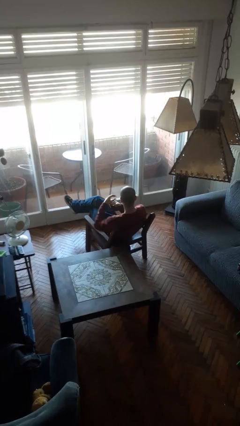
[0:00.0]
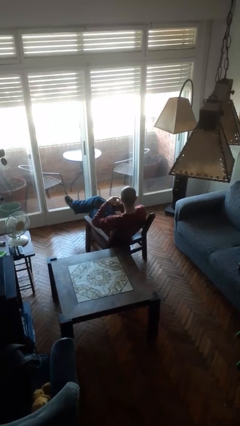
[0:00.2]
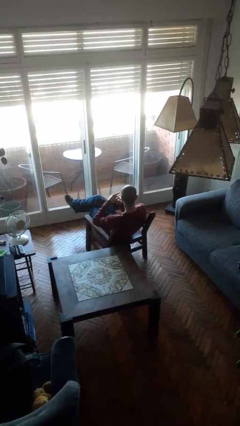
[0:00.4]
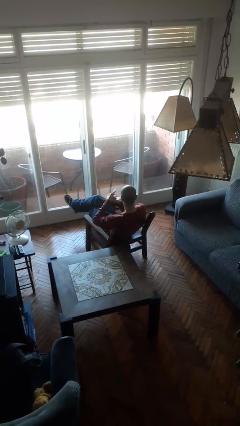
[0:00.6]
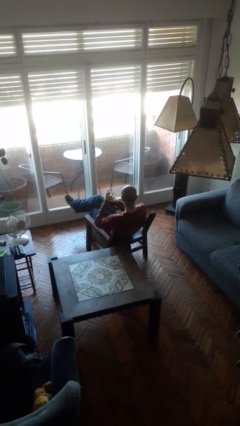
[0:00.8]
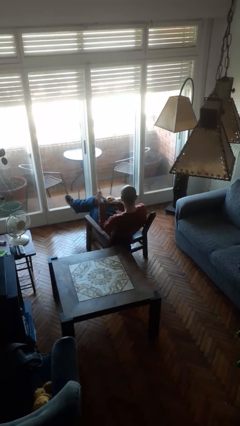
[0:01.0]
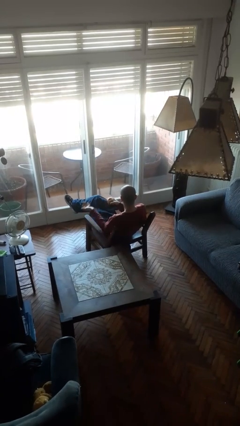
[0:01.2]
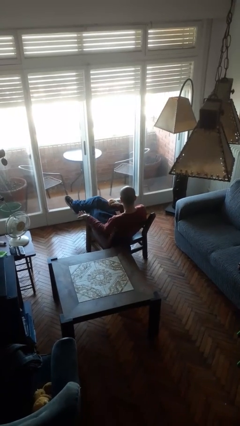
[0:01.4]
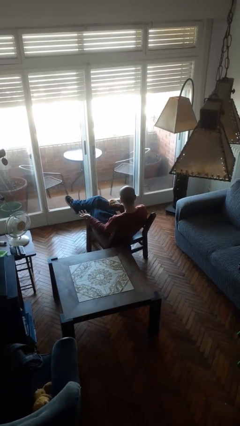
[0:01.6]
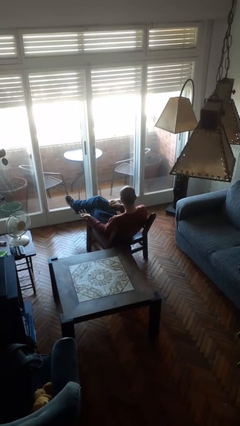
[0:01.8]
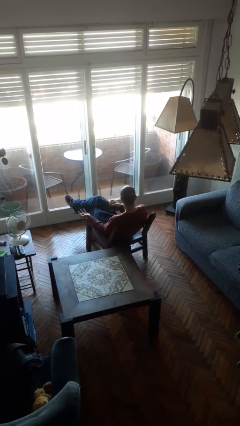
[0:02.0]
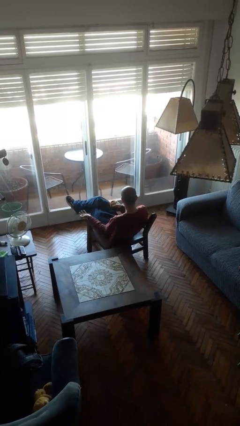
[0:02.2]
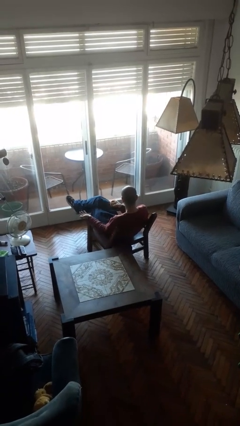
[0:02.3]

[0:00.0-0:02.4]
person opens jar

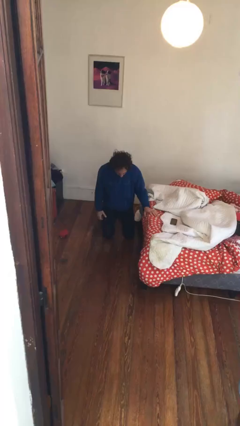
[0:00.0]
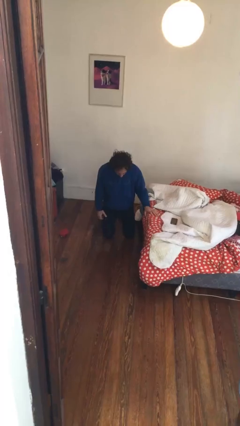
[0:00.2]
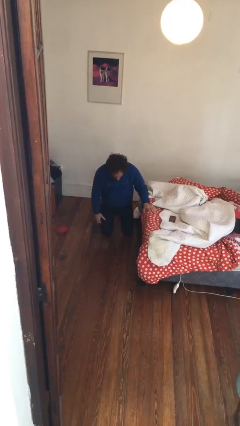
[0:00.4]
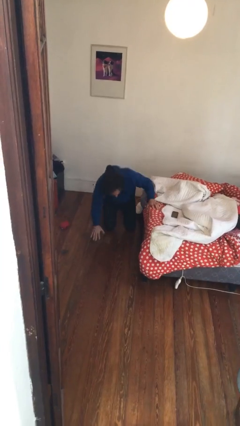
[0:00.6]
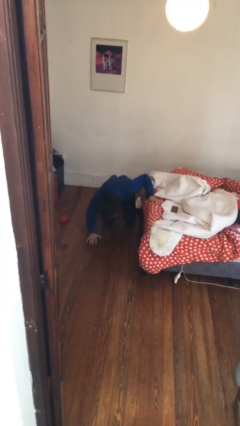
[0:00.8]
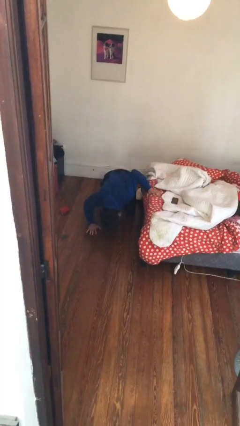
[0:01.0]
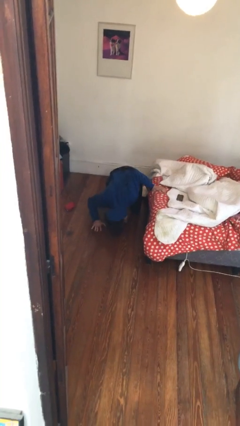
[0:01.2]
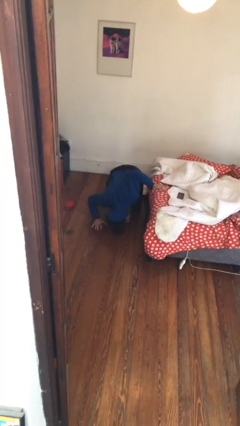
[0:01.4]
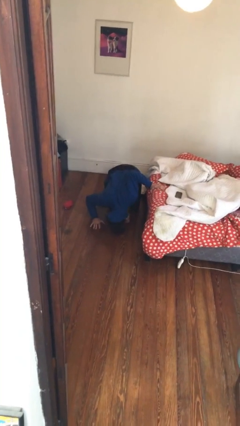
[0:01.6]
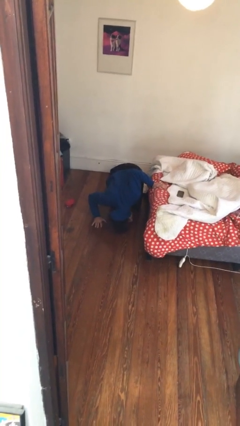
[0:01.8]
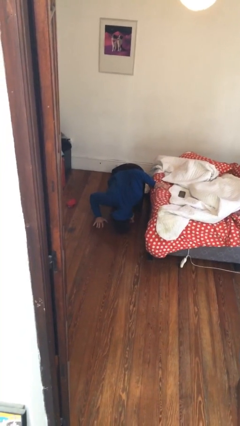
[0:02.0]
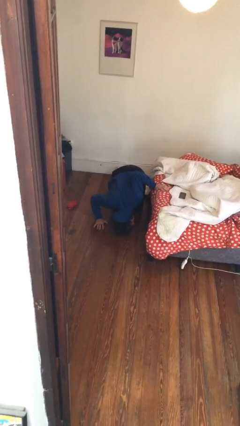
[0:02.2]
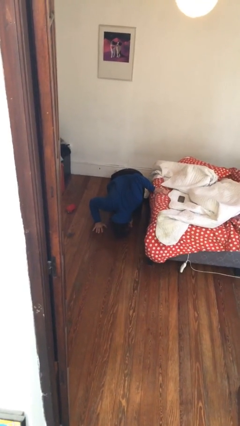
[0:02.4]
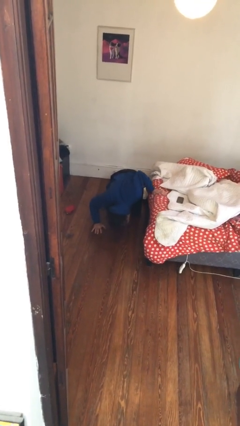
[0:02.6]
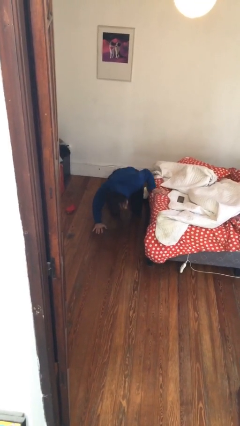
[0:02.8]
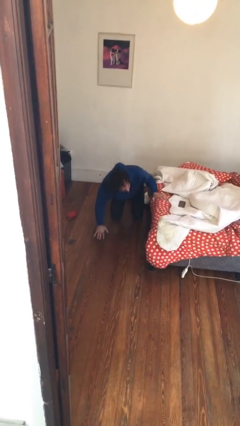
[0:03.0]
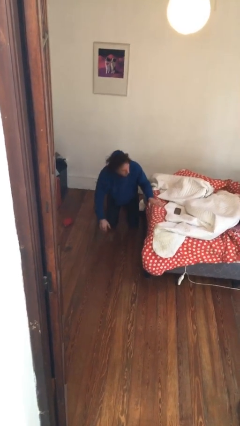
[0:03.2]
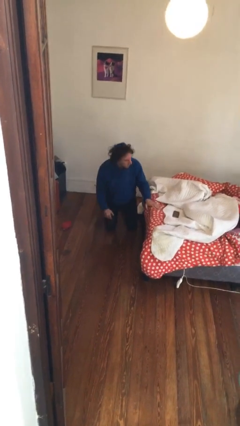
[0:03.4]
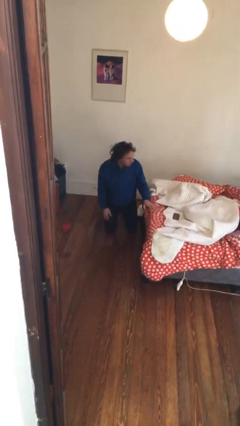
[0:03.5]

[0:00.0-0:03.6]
person searches under bed

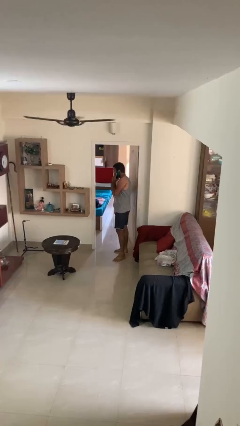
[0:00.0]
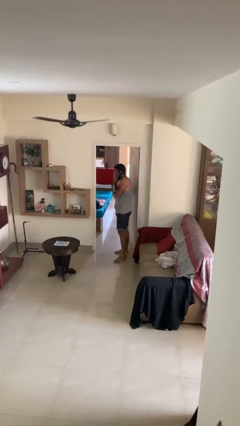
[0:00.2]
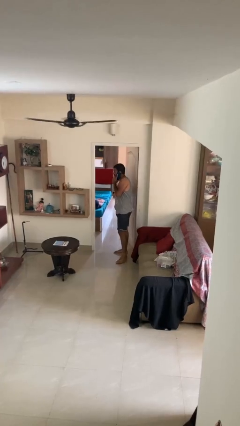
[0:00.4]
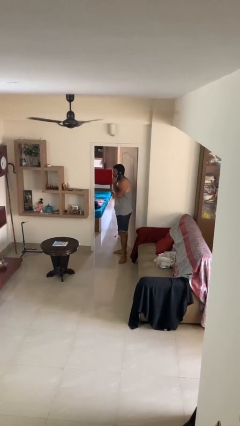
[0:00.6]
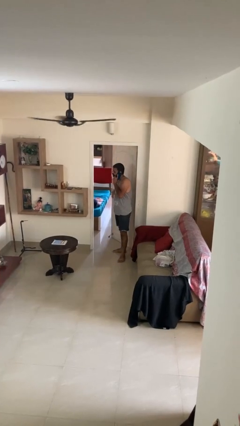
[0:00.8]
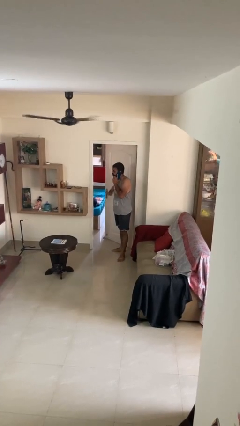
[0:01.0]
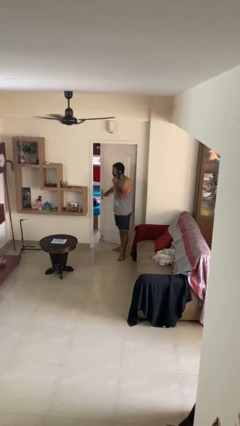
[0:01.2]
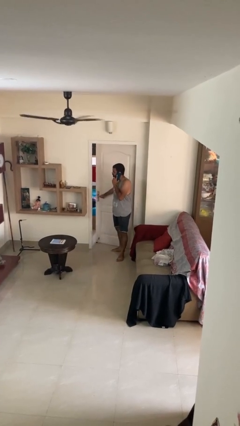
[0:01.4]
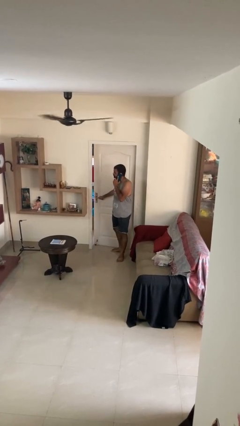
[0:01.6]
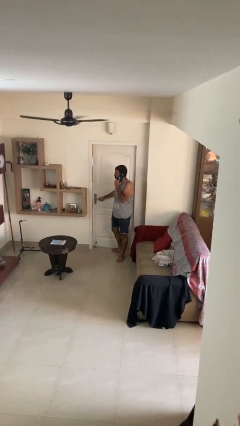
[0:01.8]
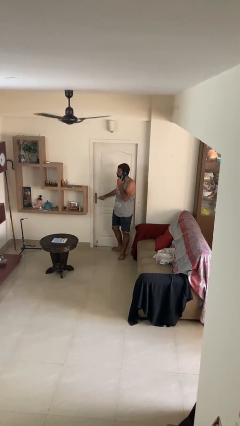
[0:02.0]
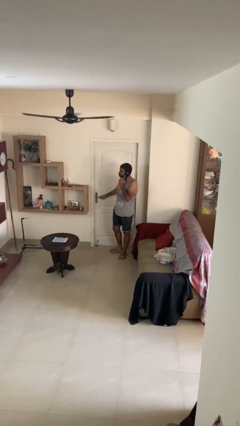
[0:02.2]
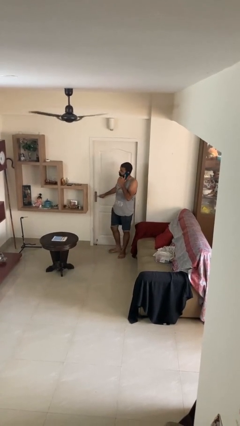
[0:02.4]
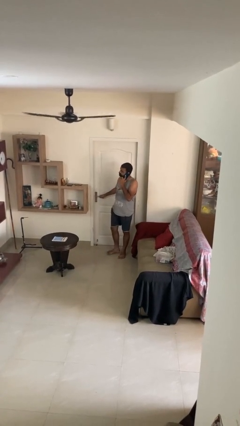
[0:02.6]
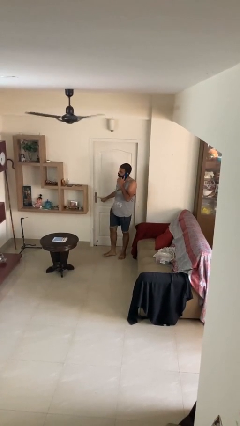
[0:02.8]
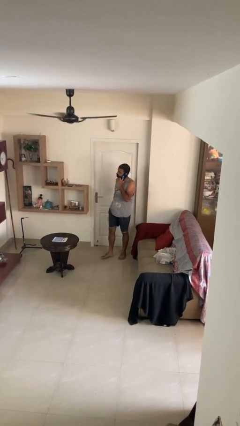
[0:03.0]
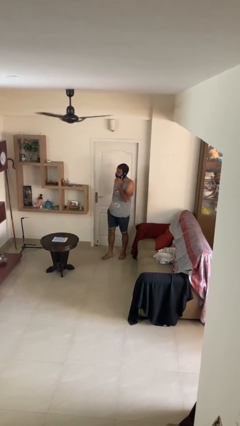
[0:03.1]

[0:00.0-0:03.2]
person closes facility door

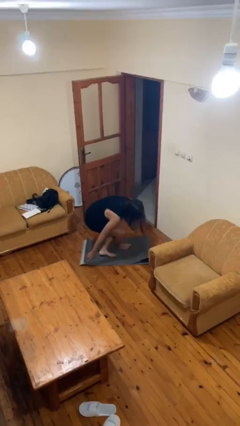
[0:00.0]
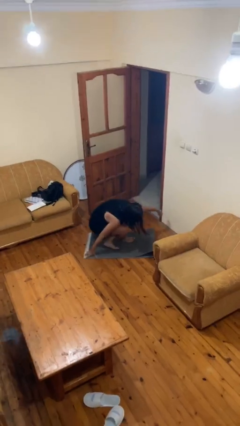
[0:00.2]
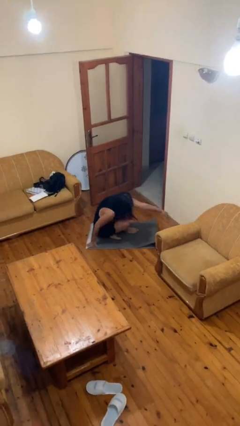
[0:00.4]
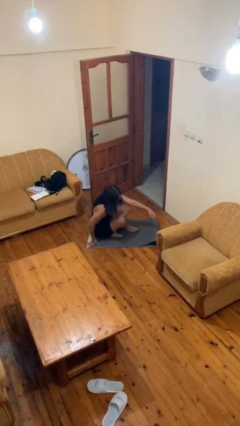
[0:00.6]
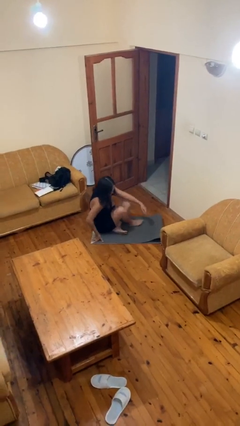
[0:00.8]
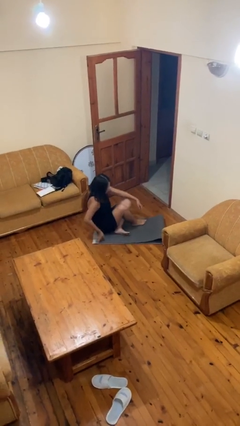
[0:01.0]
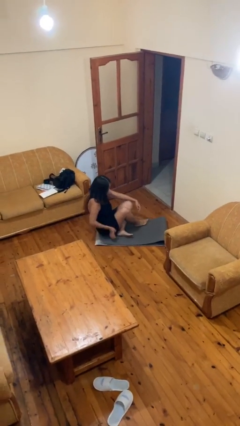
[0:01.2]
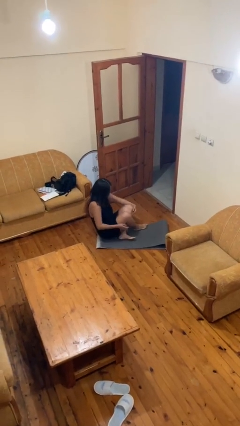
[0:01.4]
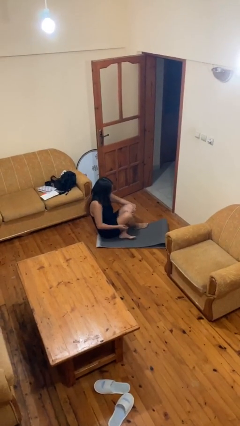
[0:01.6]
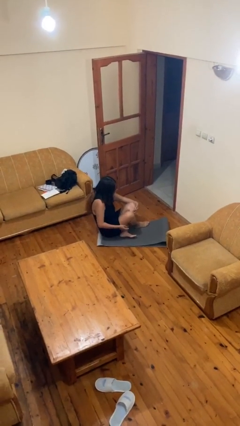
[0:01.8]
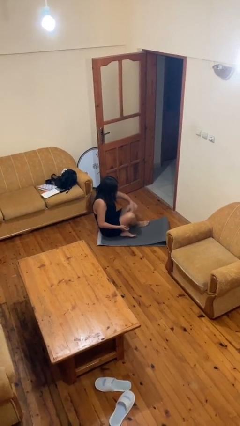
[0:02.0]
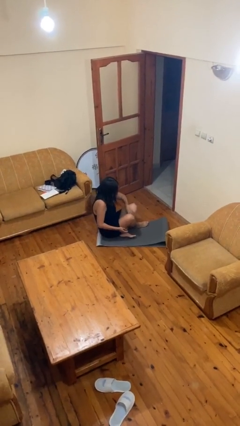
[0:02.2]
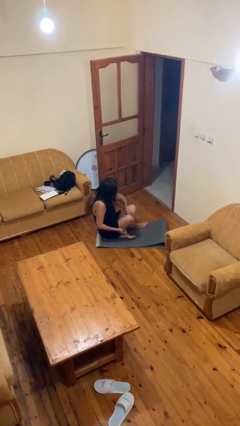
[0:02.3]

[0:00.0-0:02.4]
person sits crisscross

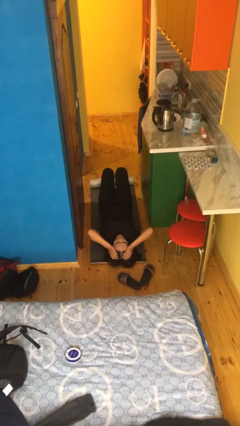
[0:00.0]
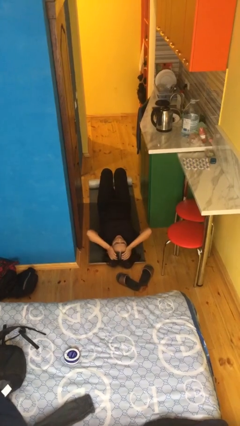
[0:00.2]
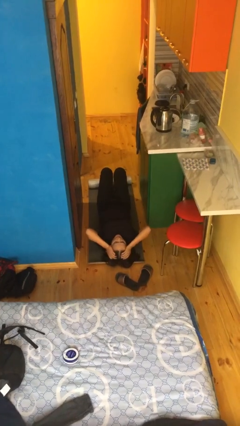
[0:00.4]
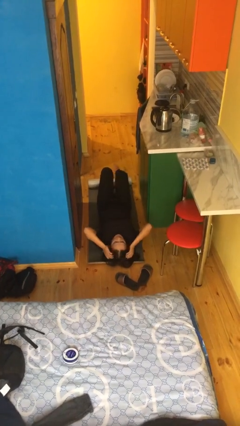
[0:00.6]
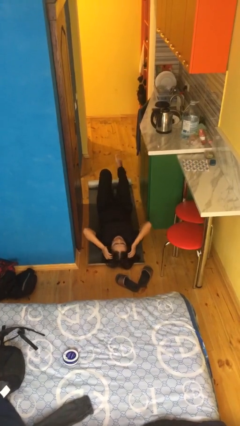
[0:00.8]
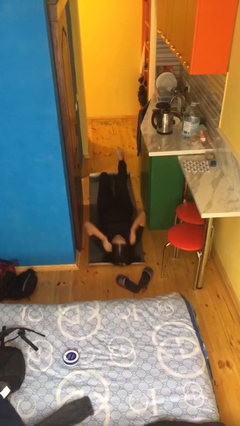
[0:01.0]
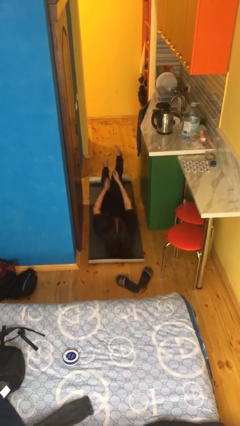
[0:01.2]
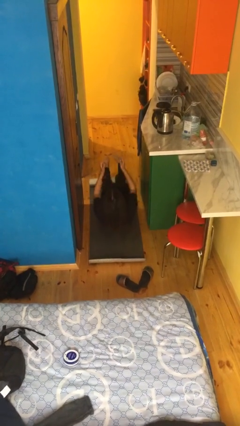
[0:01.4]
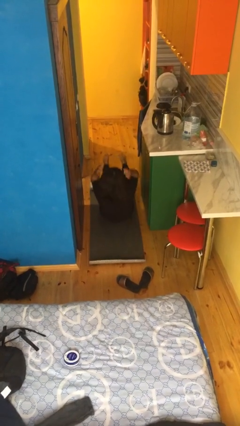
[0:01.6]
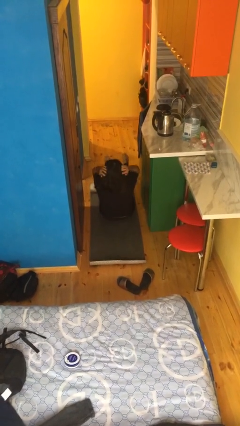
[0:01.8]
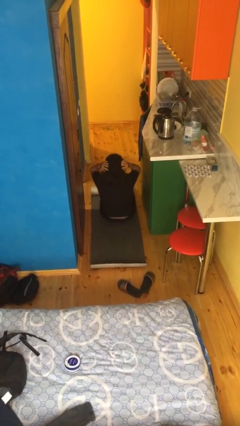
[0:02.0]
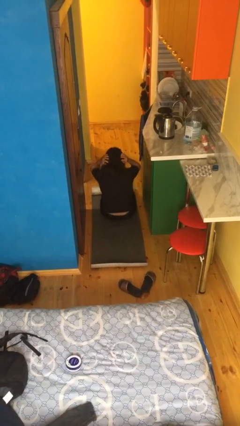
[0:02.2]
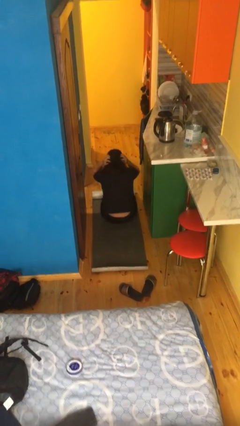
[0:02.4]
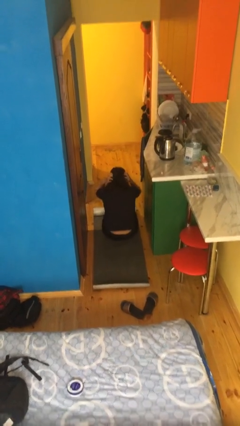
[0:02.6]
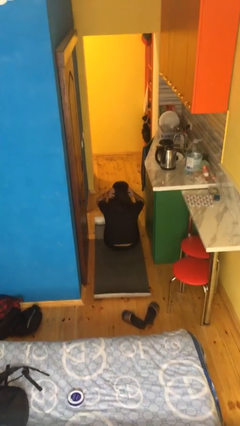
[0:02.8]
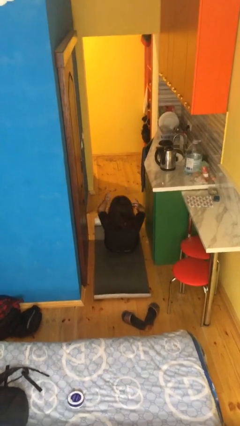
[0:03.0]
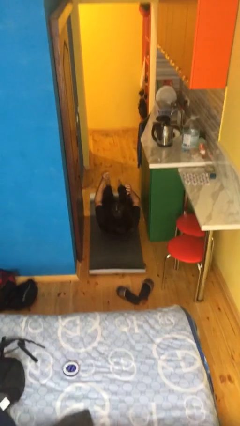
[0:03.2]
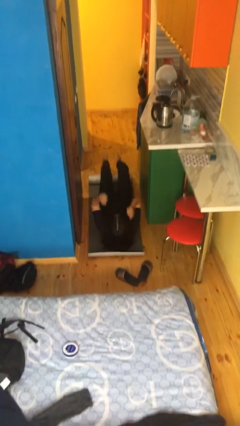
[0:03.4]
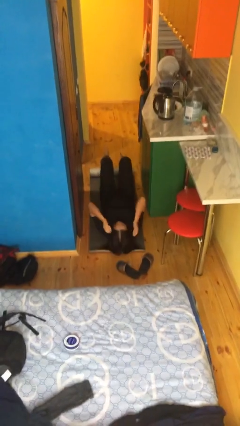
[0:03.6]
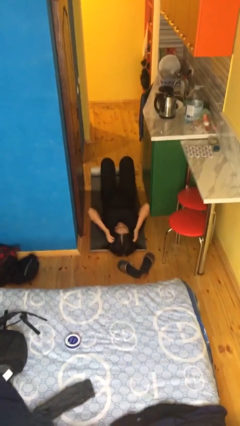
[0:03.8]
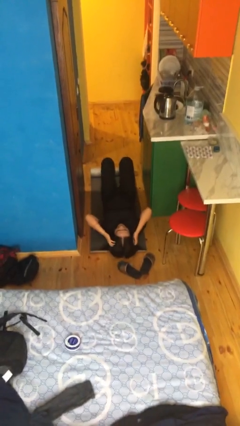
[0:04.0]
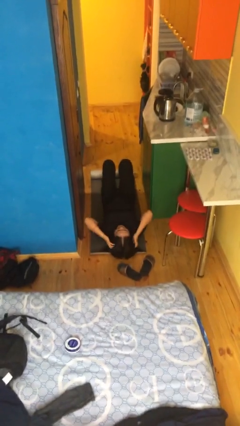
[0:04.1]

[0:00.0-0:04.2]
person exercises with situp

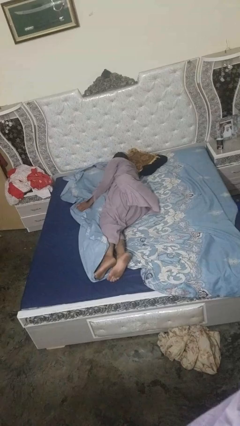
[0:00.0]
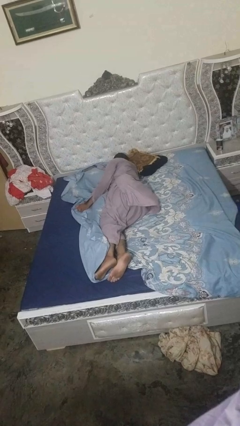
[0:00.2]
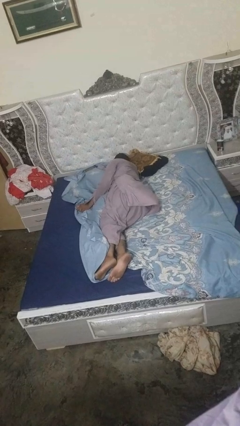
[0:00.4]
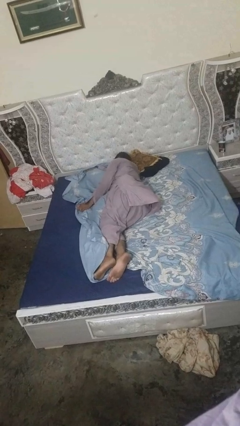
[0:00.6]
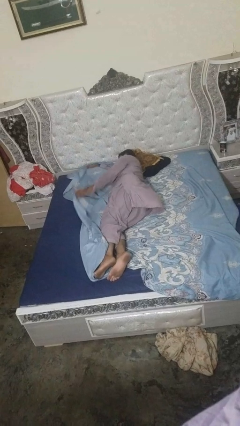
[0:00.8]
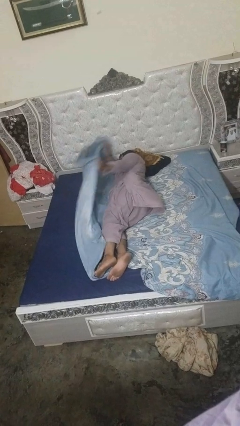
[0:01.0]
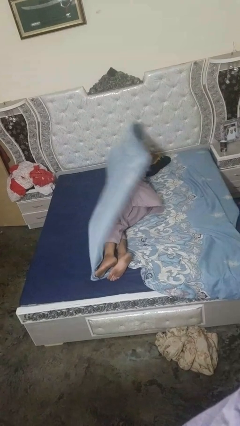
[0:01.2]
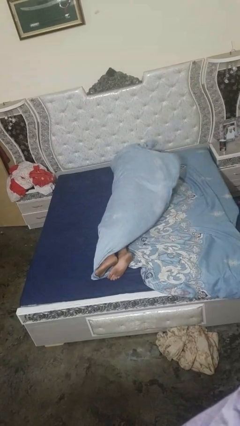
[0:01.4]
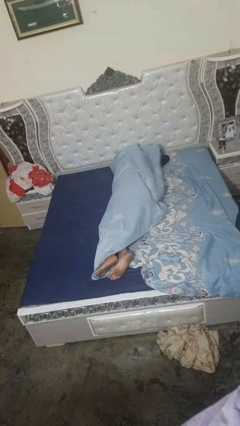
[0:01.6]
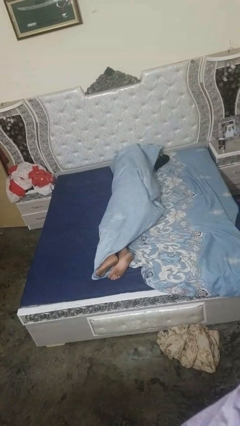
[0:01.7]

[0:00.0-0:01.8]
person covers with bedsheets
